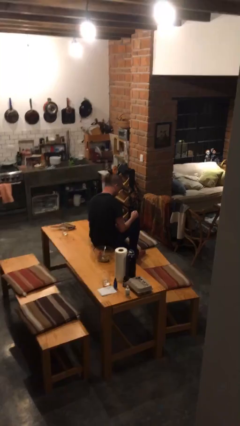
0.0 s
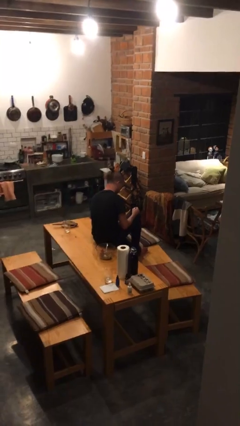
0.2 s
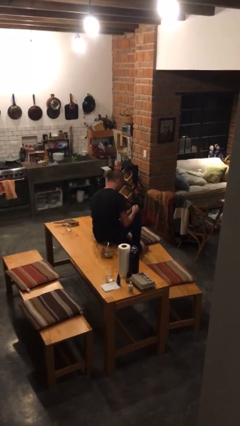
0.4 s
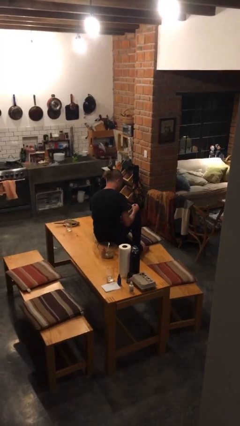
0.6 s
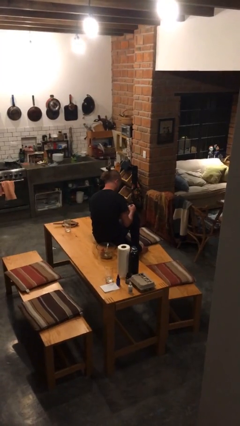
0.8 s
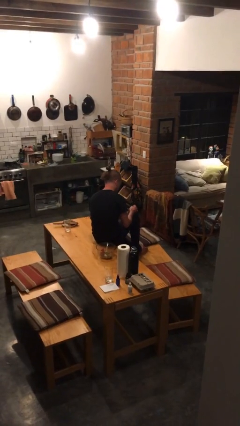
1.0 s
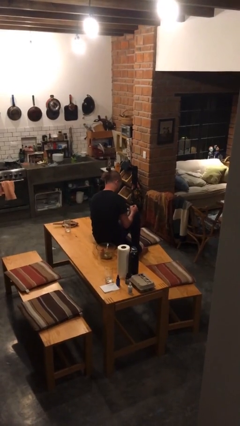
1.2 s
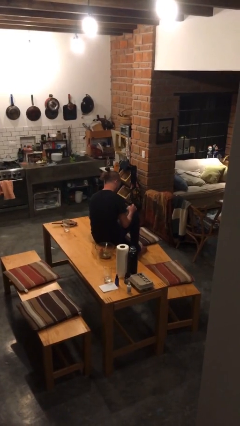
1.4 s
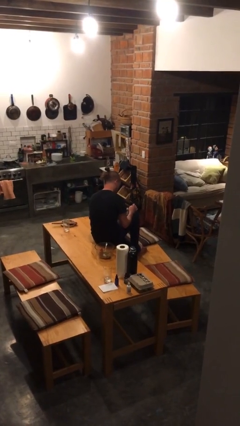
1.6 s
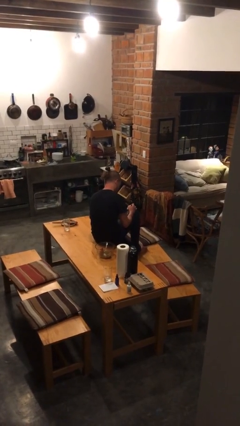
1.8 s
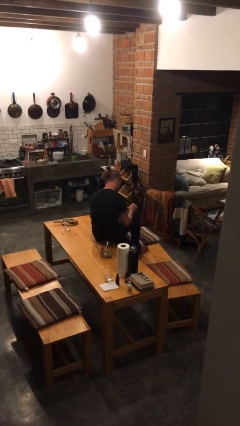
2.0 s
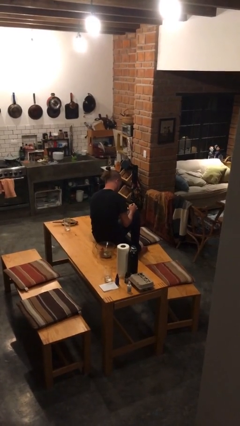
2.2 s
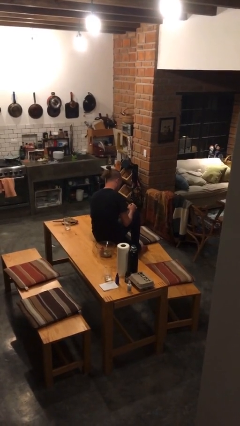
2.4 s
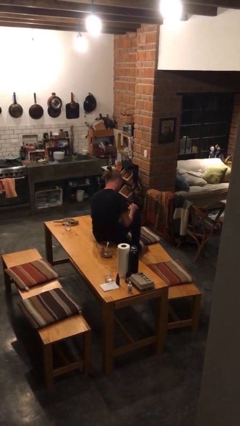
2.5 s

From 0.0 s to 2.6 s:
person paints fingernails

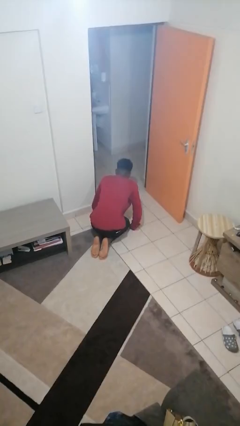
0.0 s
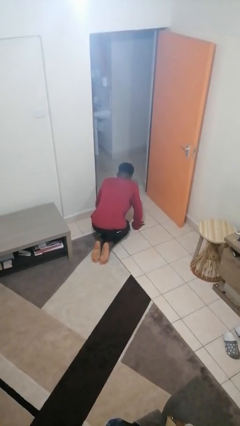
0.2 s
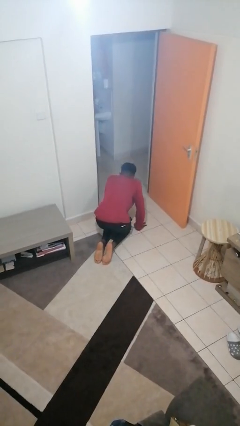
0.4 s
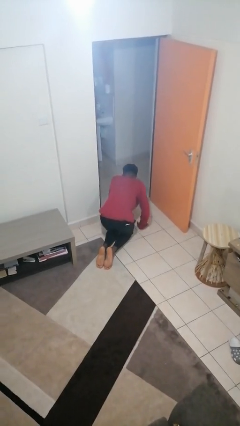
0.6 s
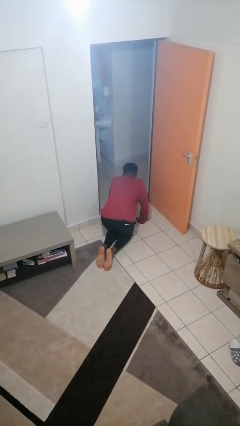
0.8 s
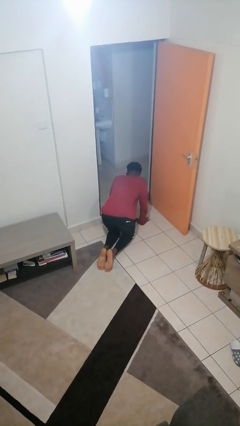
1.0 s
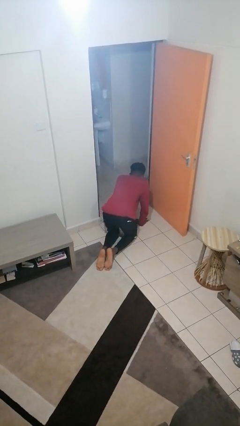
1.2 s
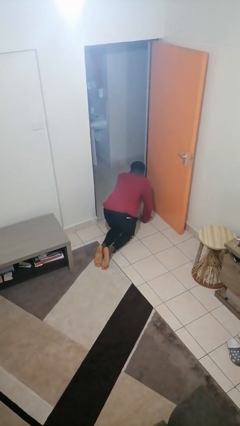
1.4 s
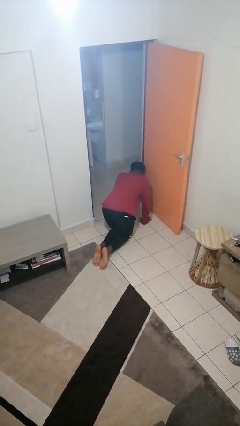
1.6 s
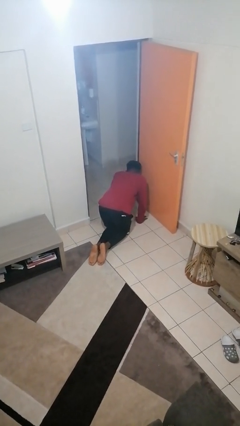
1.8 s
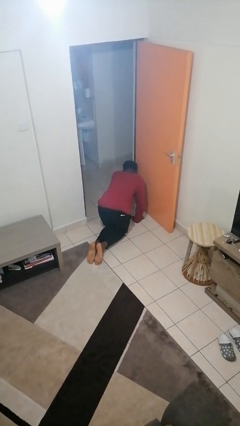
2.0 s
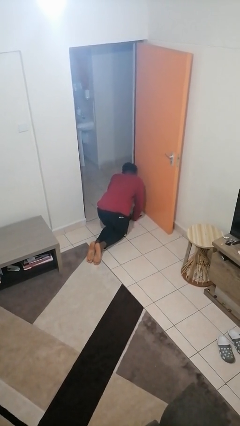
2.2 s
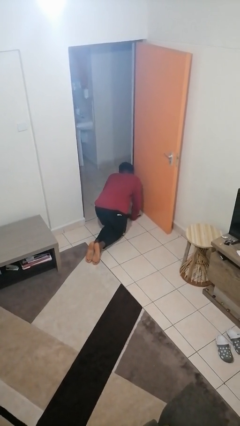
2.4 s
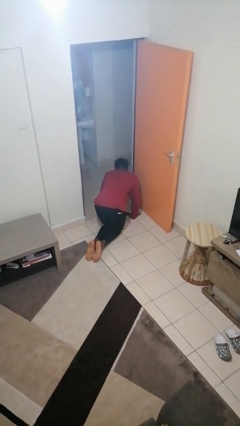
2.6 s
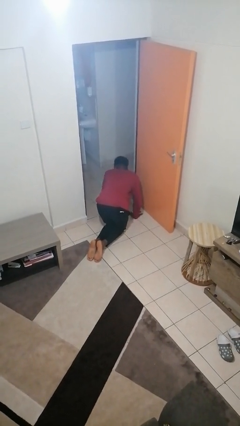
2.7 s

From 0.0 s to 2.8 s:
person crawls

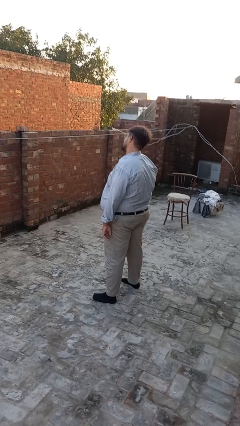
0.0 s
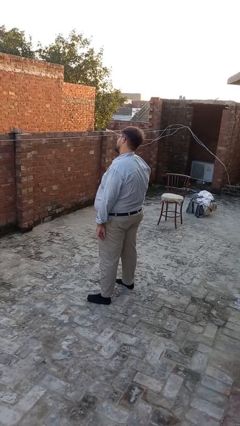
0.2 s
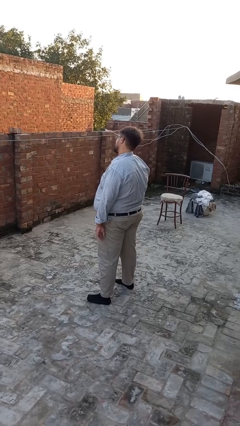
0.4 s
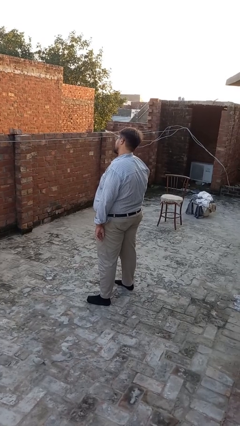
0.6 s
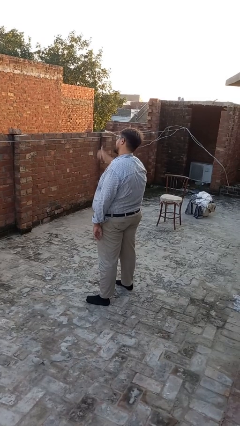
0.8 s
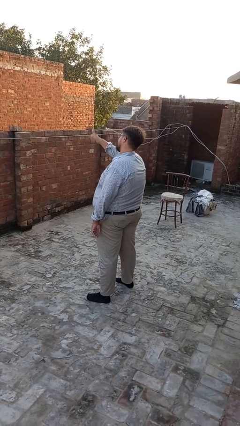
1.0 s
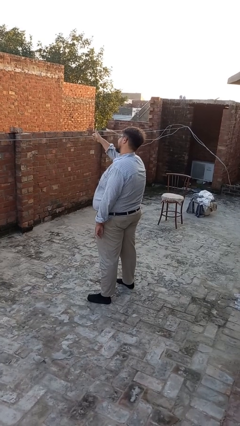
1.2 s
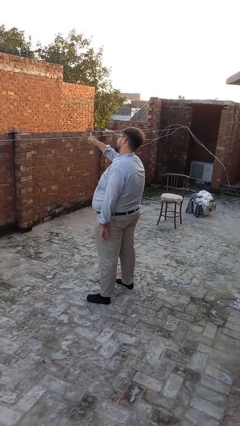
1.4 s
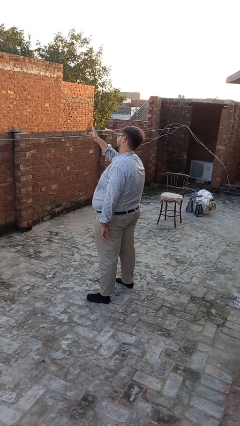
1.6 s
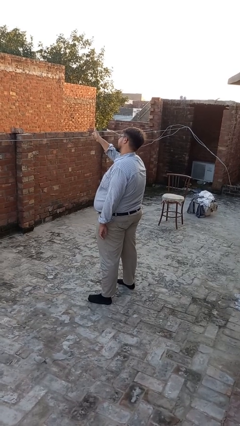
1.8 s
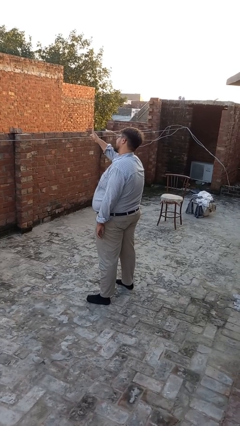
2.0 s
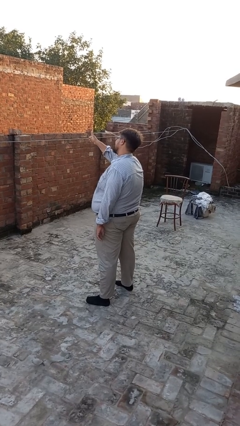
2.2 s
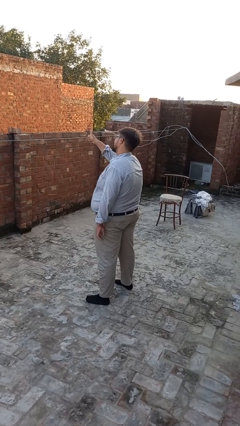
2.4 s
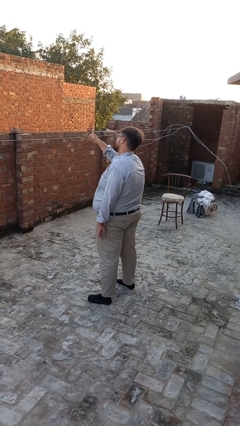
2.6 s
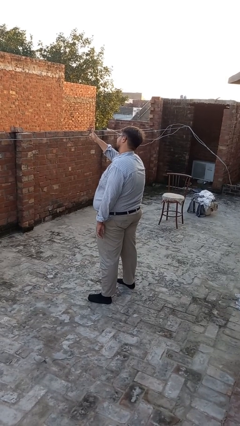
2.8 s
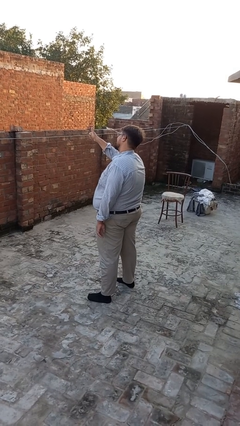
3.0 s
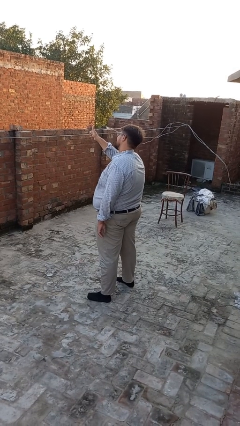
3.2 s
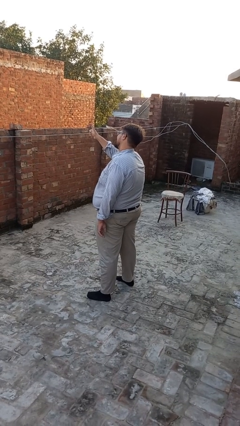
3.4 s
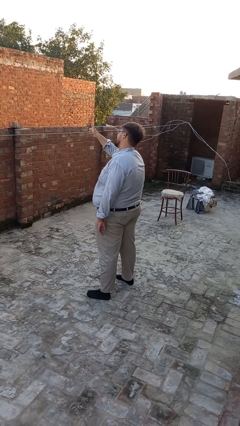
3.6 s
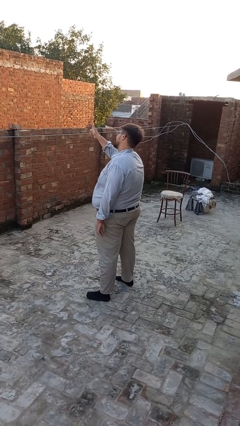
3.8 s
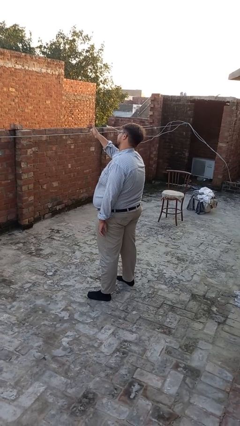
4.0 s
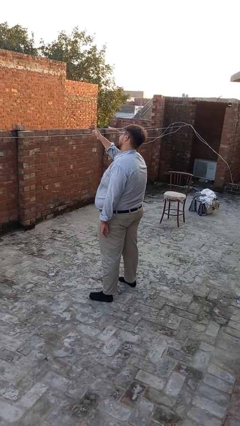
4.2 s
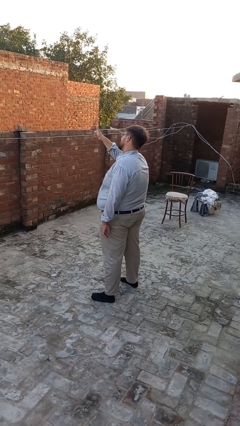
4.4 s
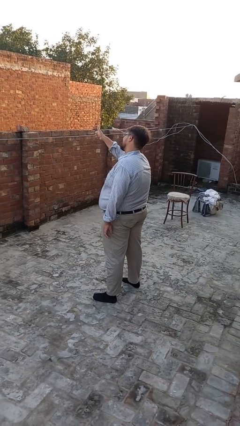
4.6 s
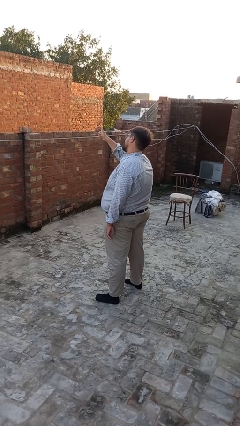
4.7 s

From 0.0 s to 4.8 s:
person gestures thumbs up

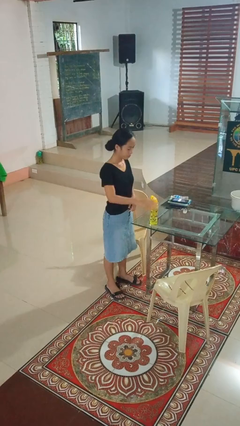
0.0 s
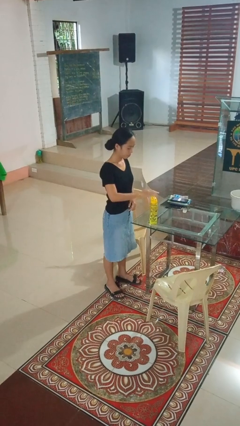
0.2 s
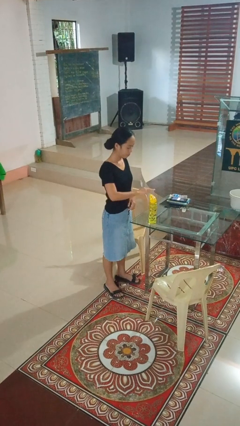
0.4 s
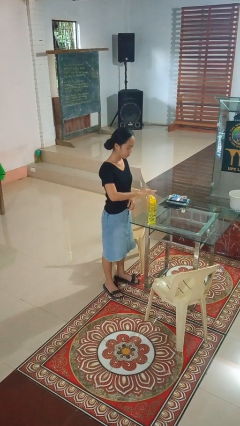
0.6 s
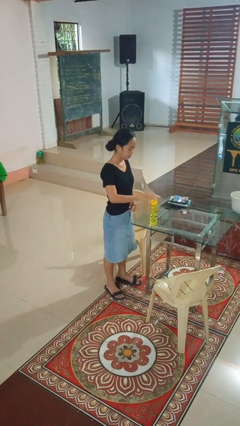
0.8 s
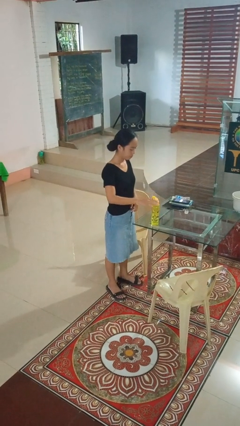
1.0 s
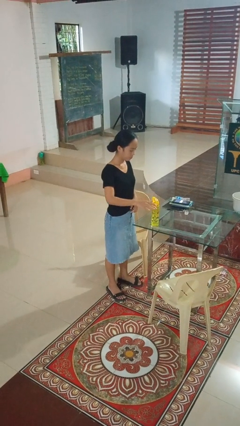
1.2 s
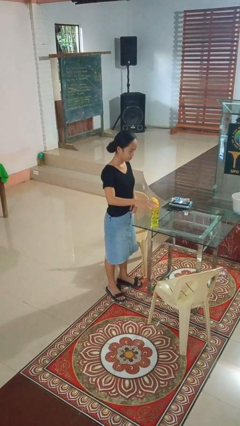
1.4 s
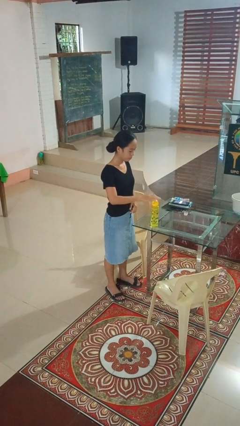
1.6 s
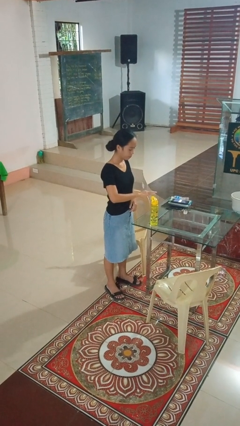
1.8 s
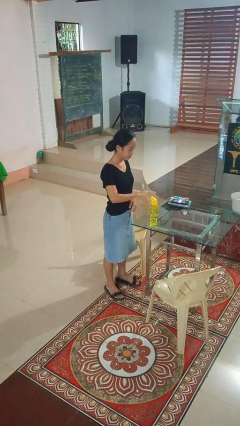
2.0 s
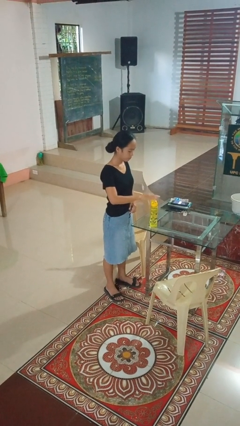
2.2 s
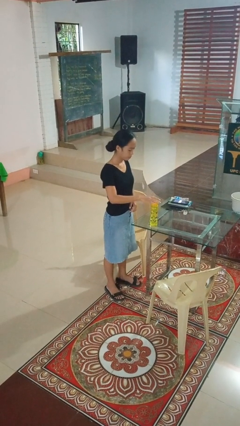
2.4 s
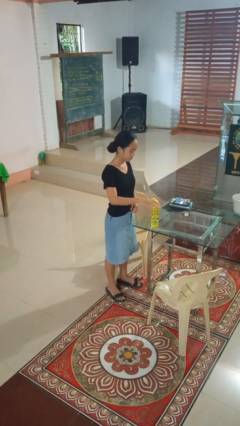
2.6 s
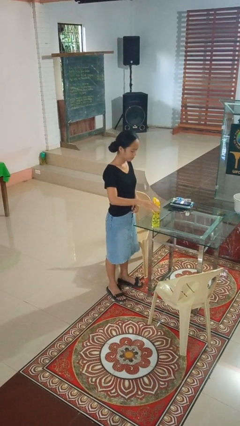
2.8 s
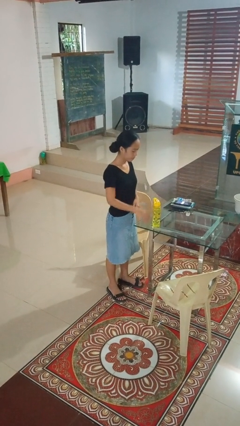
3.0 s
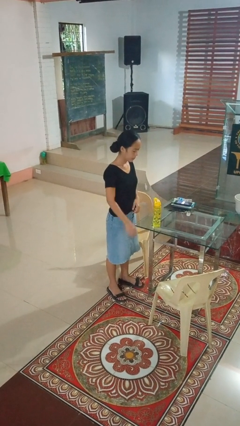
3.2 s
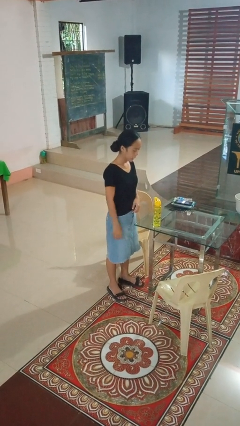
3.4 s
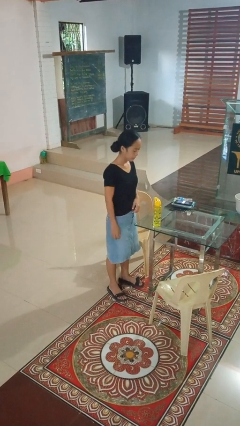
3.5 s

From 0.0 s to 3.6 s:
person waves hand over object

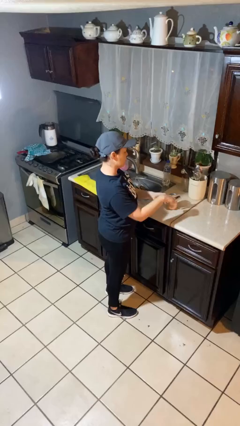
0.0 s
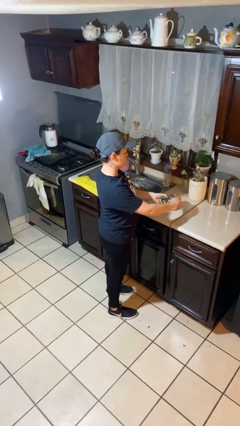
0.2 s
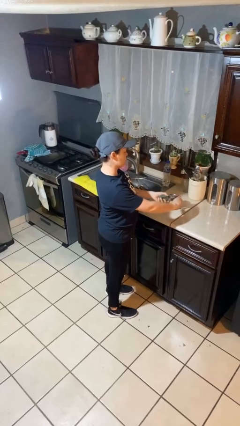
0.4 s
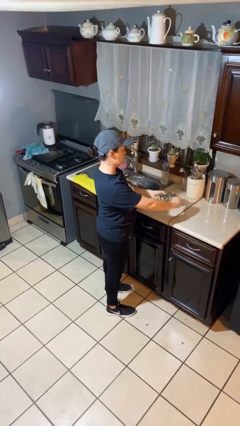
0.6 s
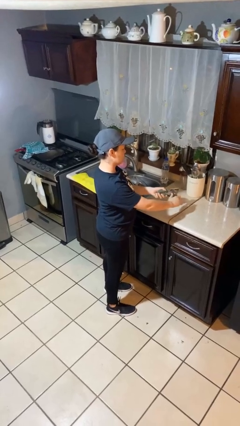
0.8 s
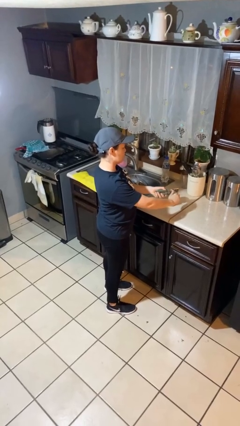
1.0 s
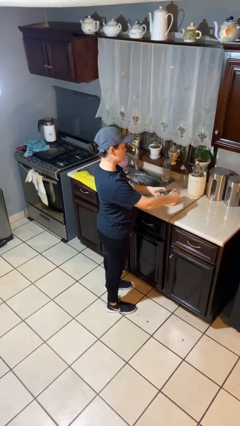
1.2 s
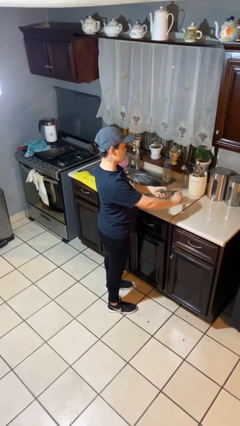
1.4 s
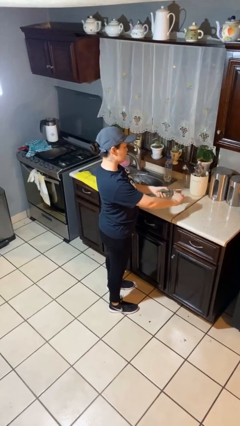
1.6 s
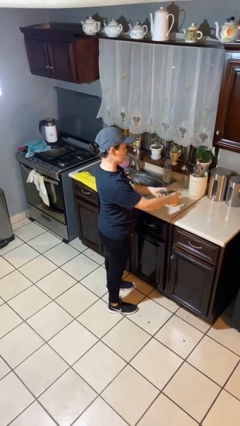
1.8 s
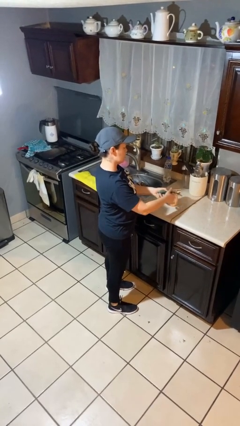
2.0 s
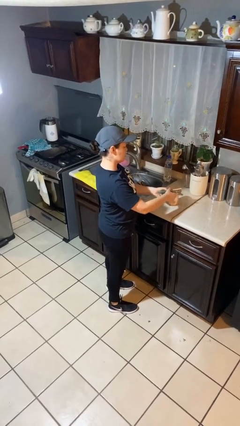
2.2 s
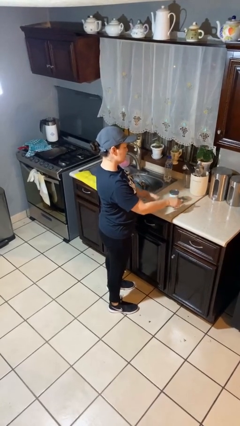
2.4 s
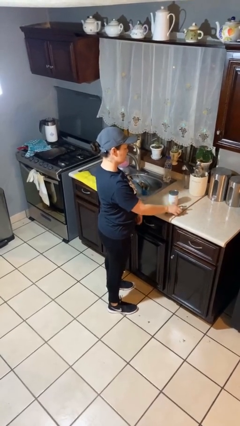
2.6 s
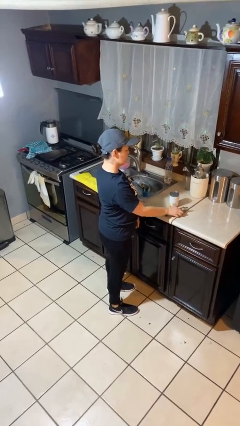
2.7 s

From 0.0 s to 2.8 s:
person opens can with can opener

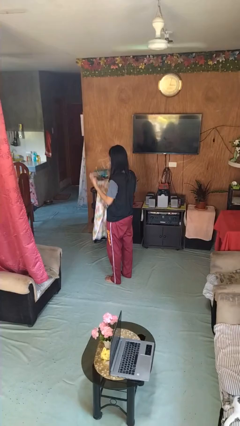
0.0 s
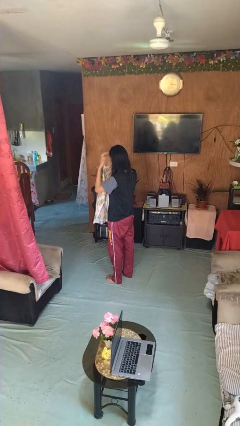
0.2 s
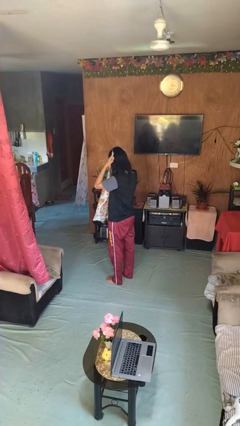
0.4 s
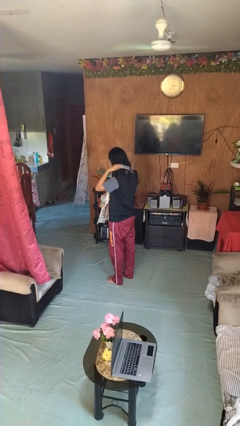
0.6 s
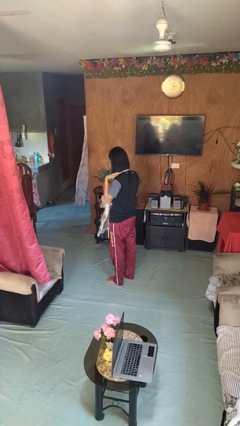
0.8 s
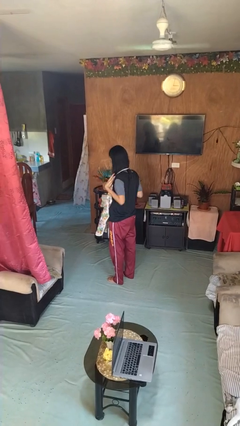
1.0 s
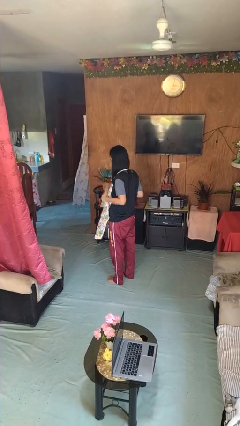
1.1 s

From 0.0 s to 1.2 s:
person puts on apron
